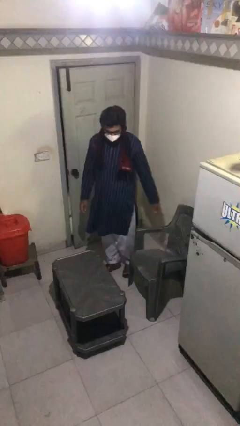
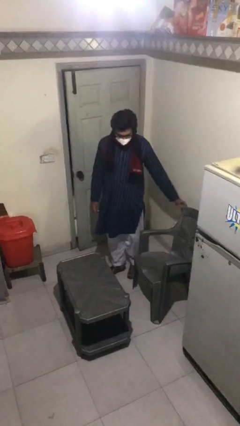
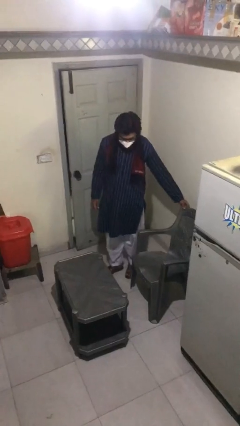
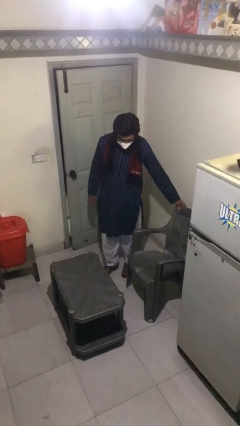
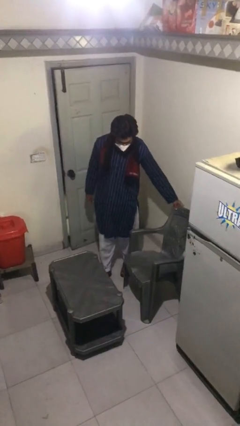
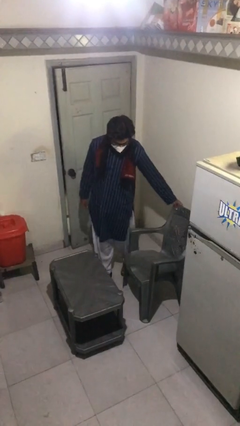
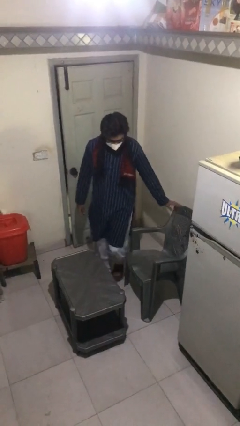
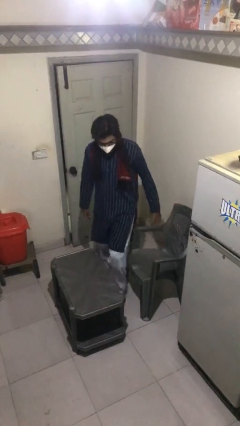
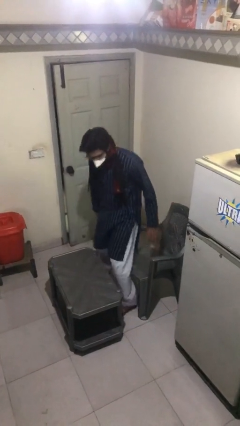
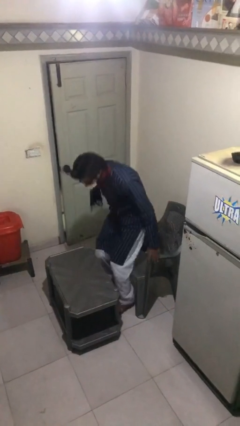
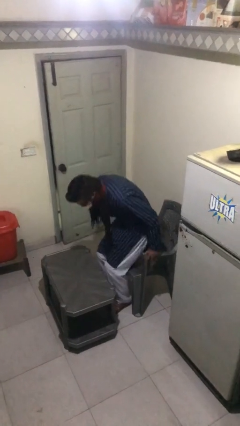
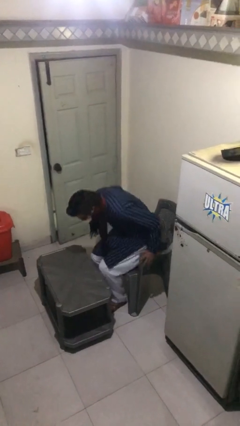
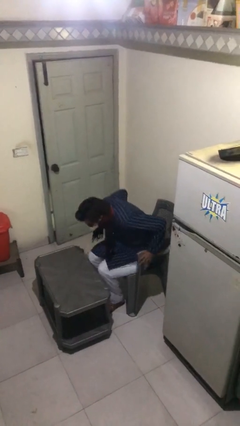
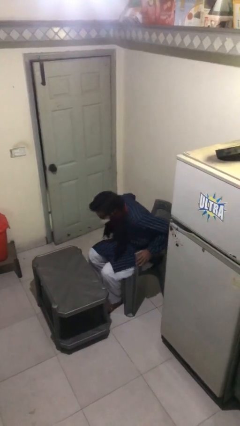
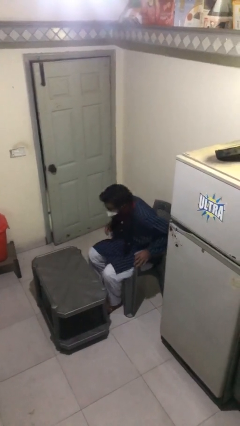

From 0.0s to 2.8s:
person sits down

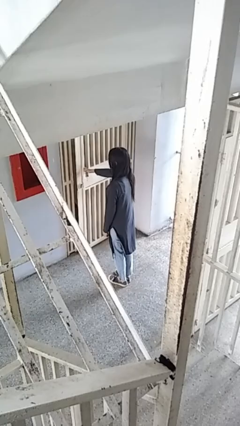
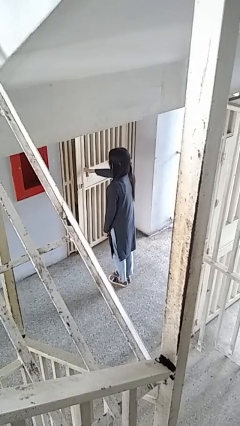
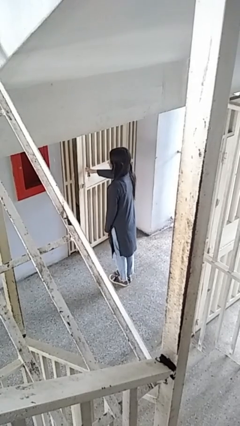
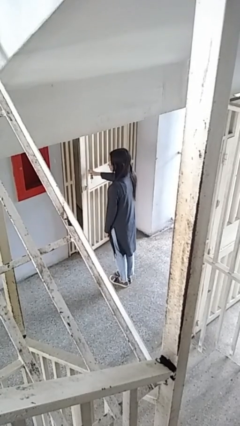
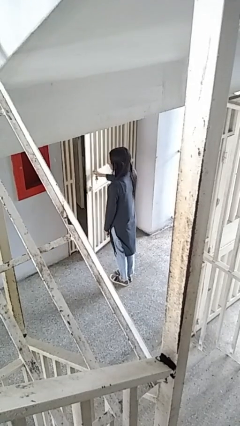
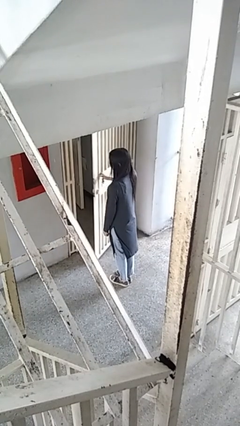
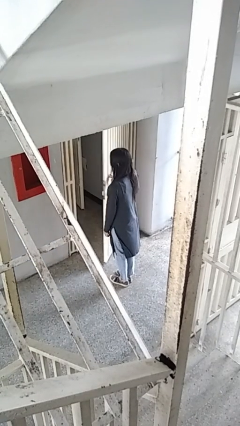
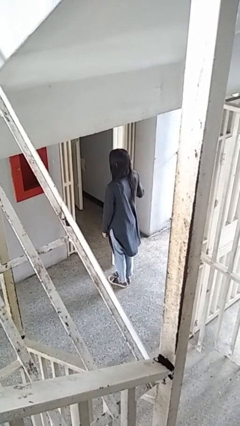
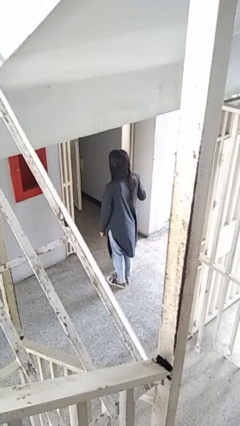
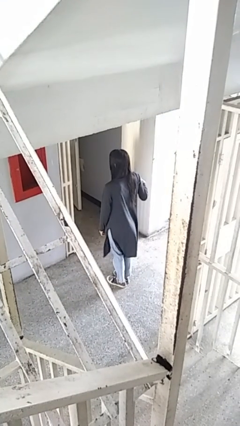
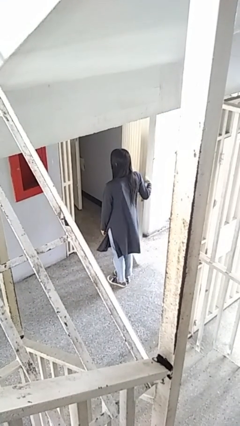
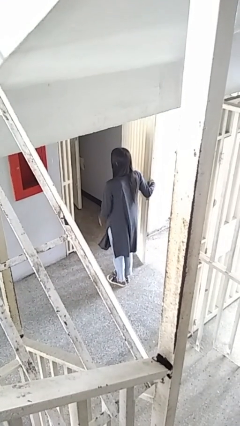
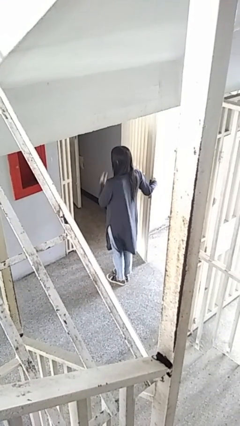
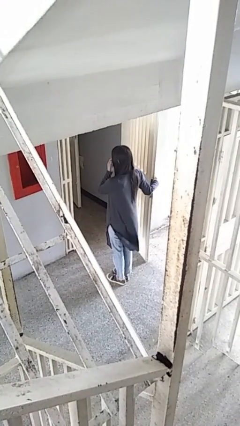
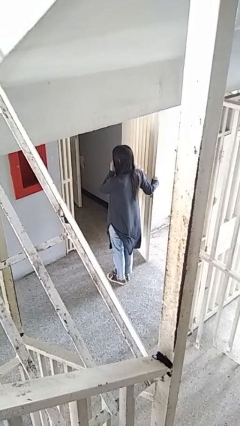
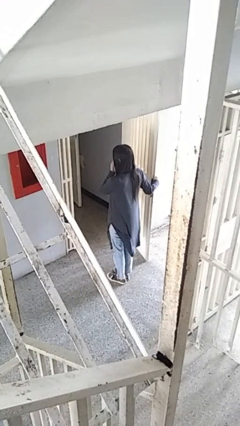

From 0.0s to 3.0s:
person opens gate

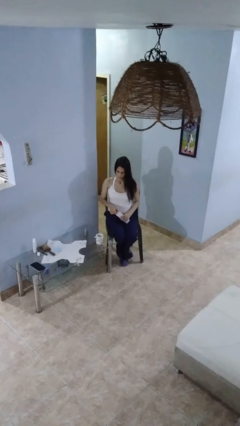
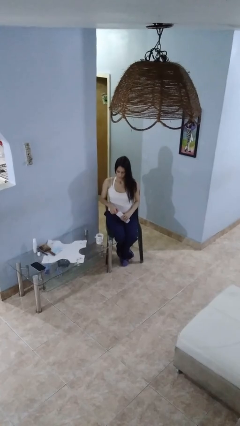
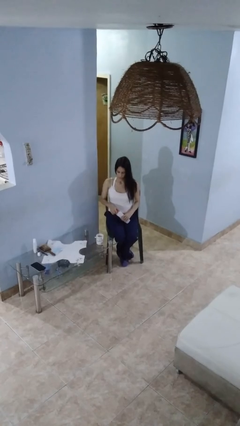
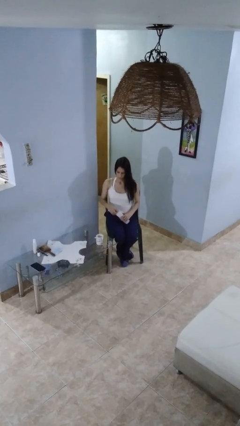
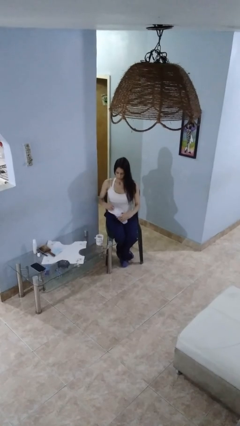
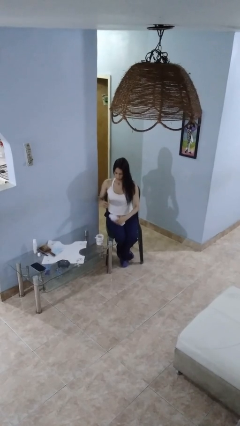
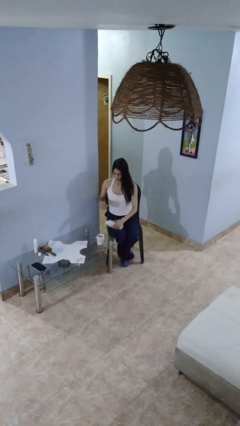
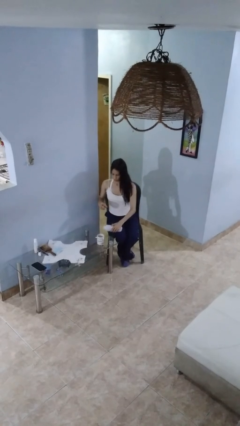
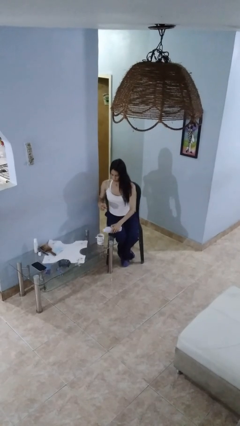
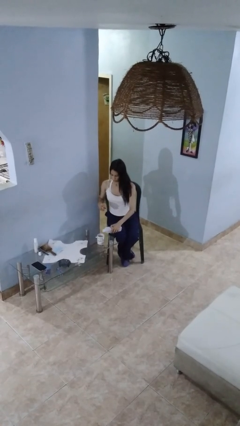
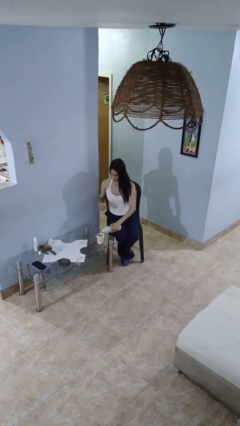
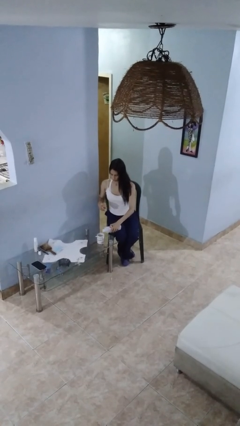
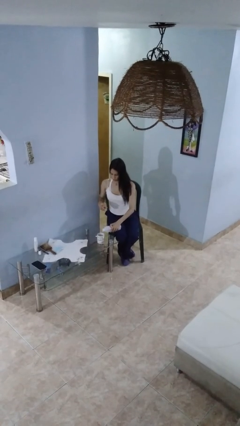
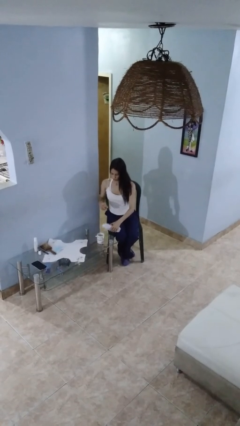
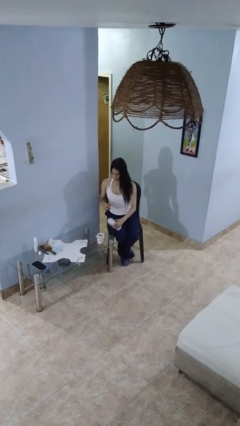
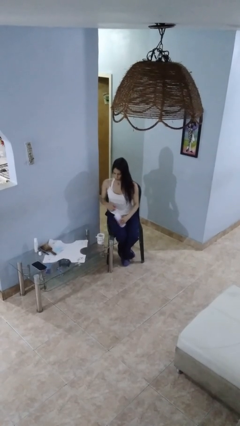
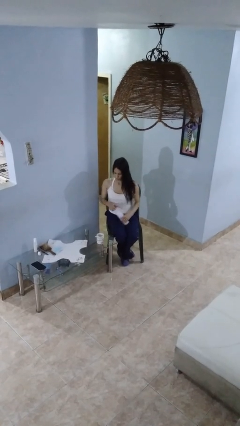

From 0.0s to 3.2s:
person pours liquid into cup

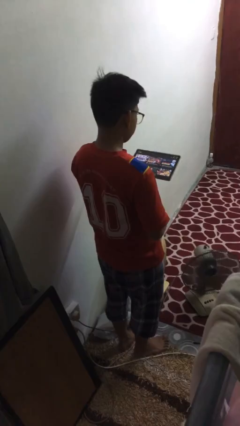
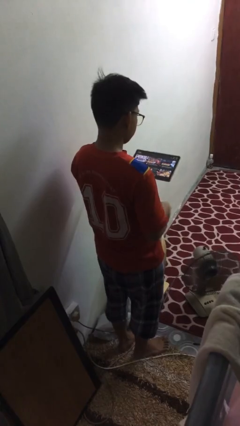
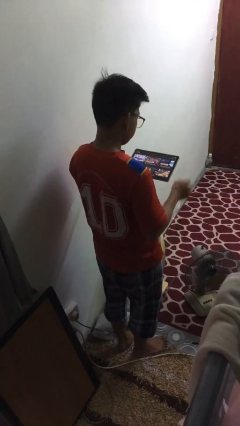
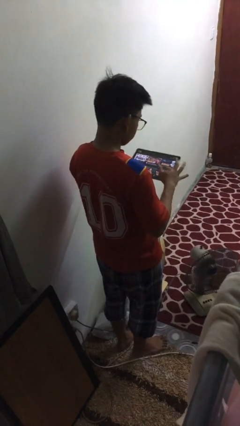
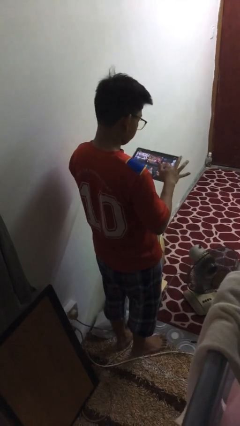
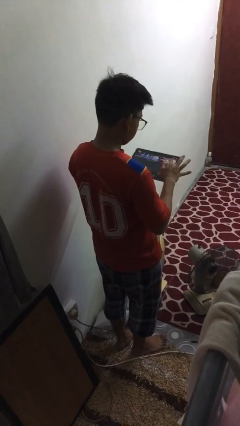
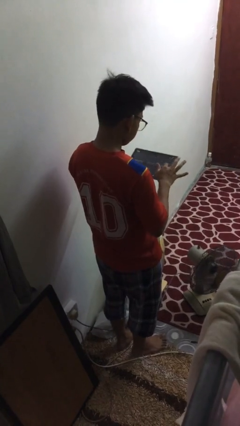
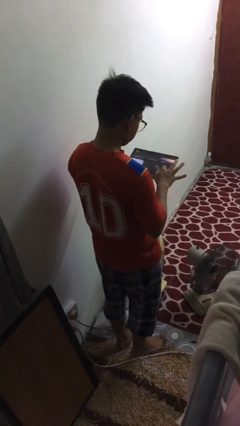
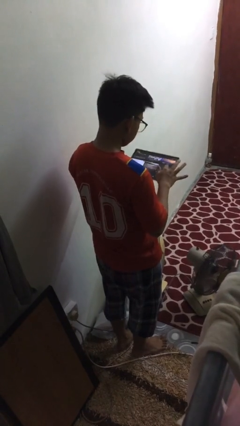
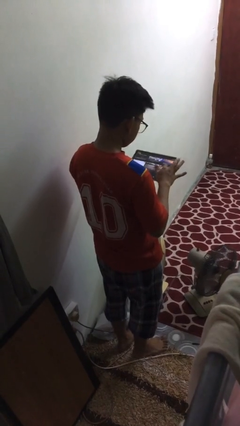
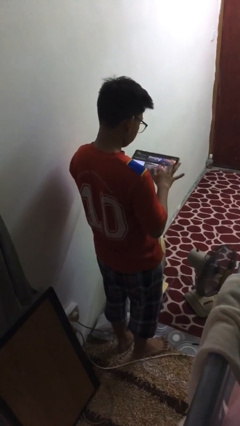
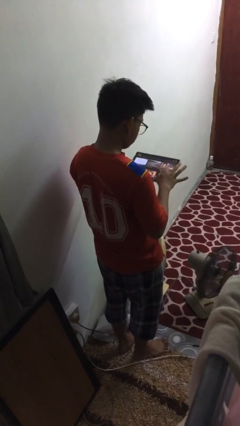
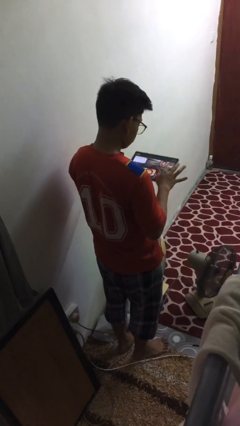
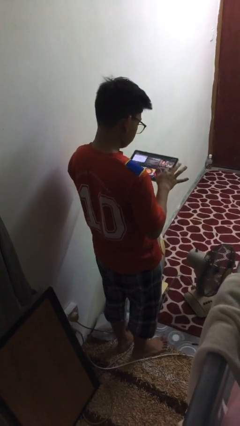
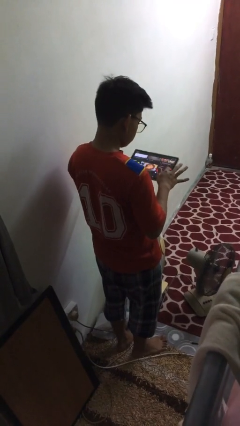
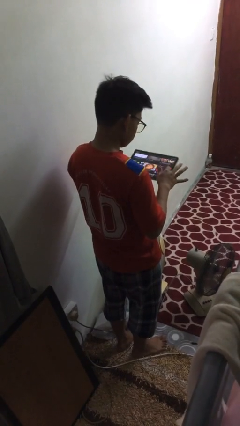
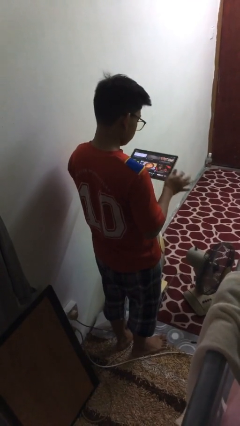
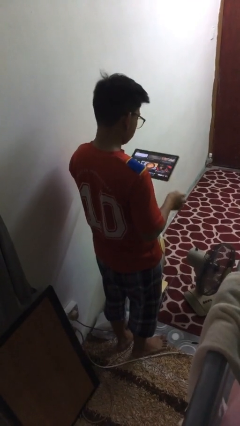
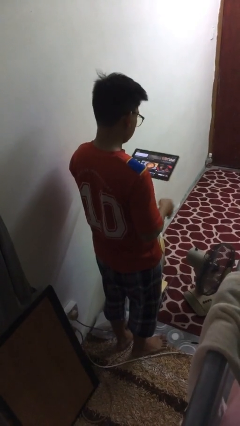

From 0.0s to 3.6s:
person interacts with tablet

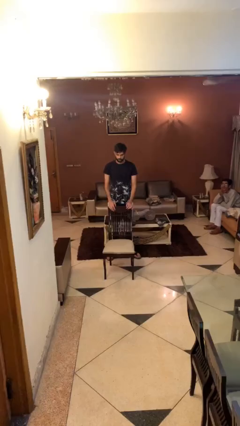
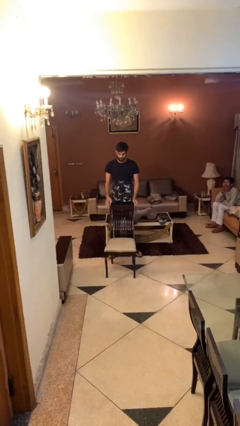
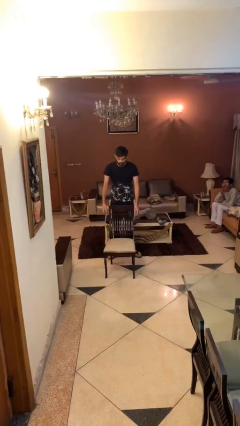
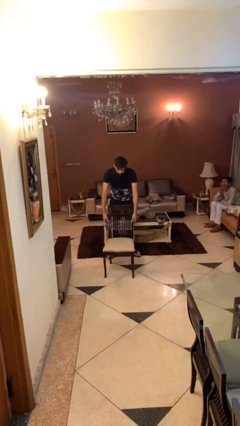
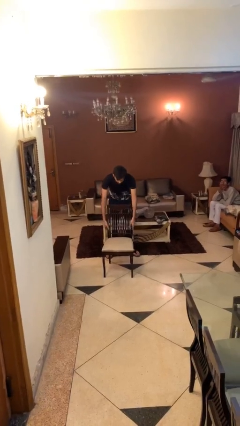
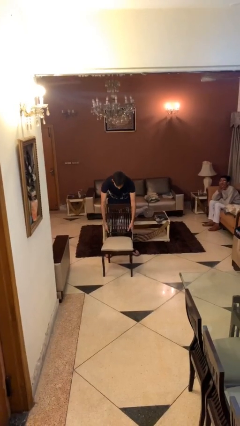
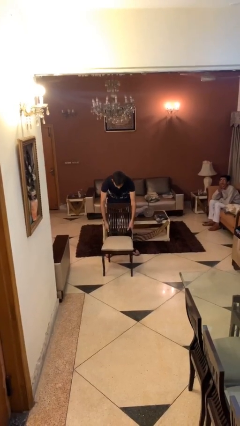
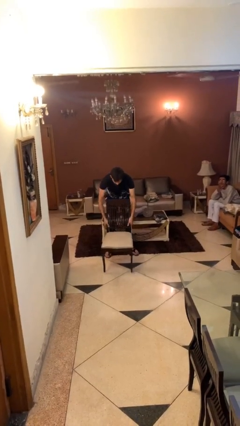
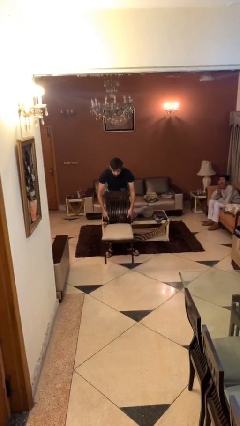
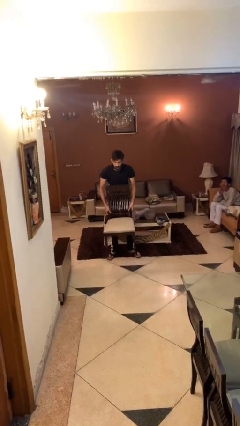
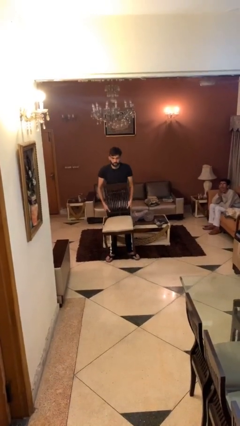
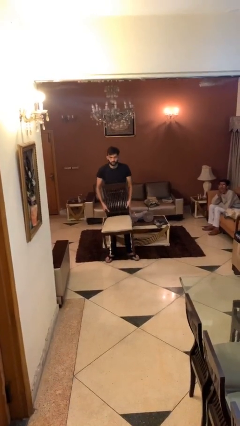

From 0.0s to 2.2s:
person picks up object from floor

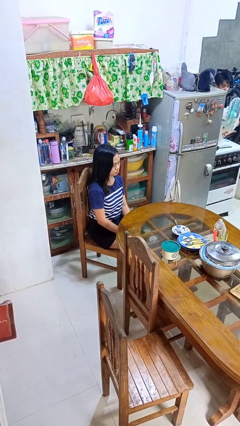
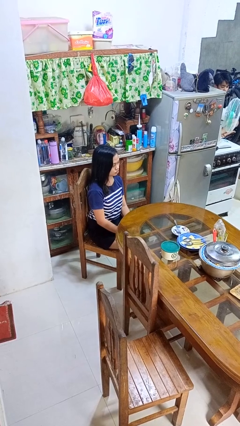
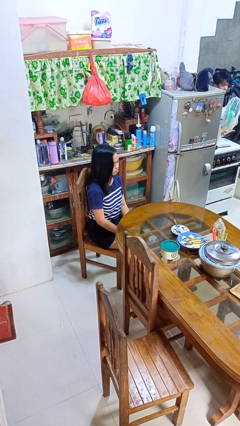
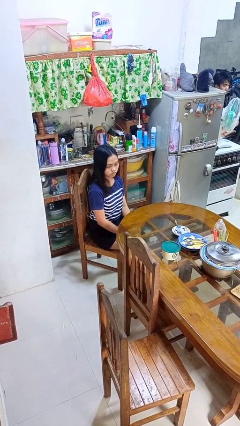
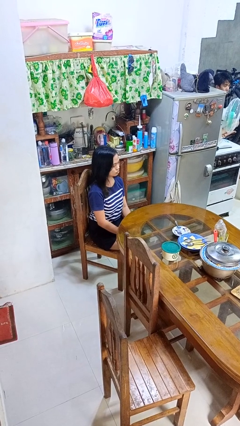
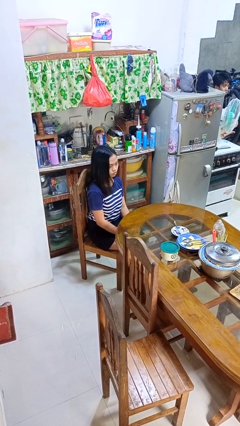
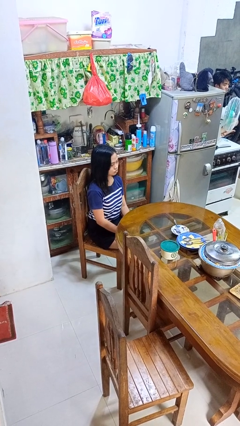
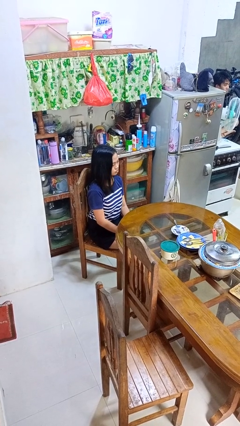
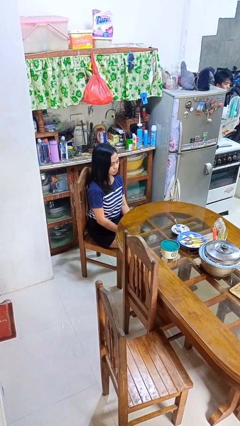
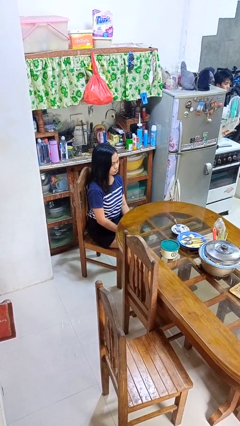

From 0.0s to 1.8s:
person shakes head

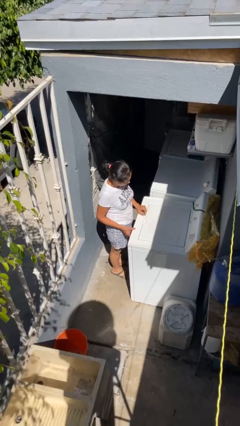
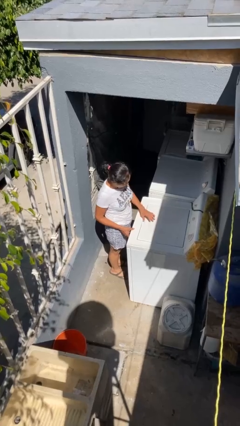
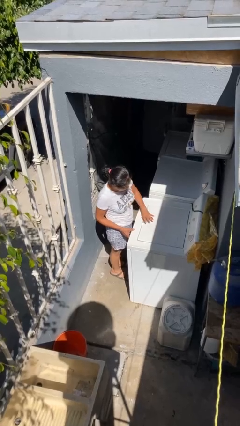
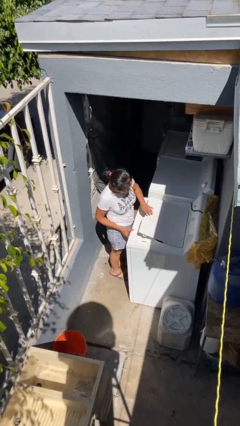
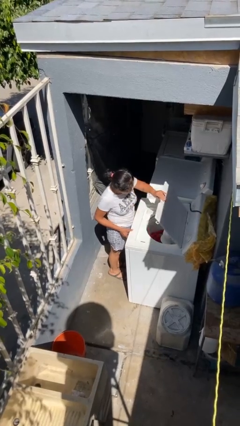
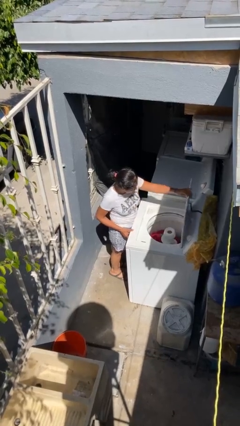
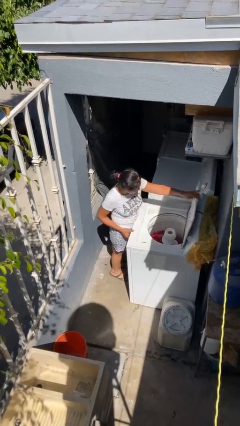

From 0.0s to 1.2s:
person opens clothes washer
